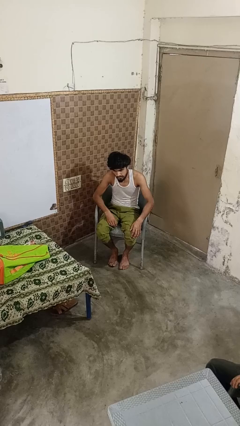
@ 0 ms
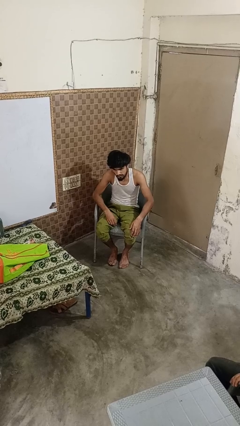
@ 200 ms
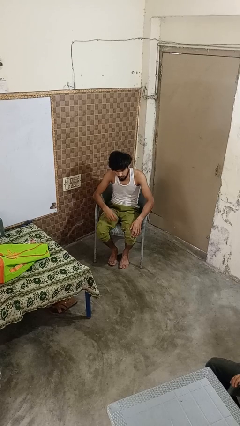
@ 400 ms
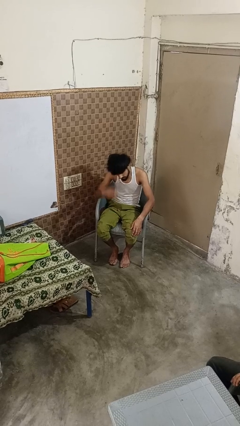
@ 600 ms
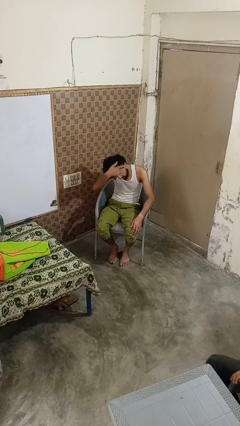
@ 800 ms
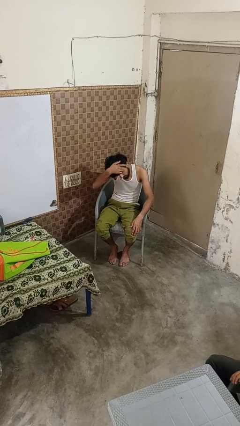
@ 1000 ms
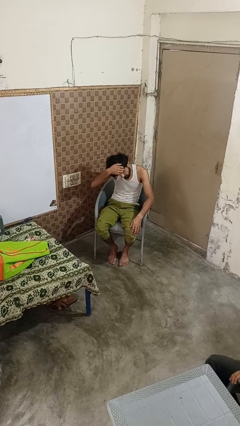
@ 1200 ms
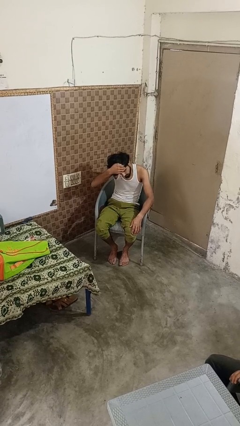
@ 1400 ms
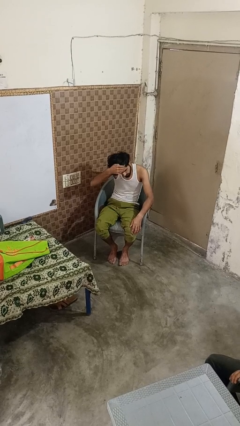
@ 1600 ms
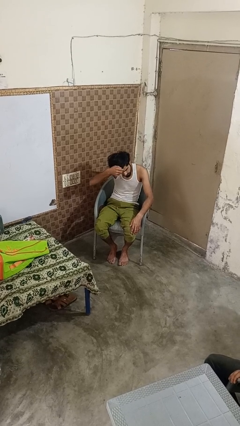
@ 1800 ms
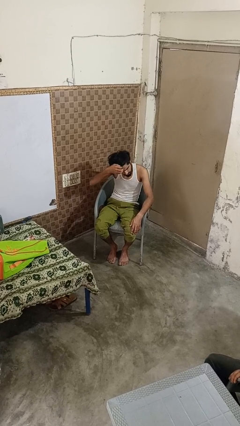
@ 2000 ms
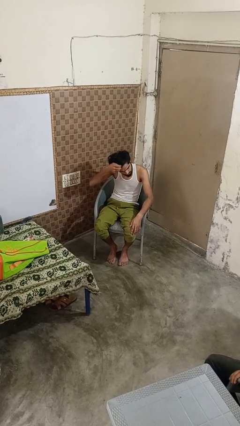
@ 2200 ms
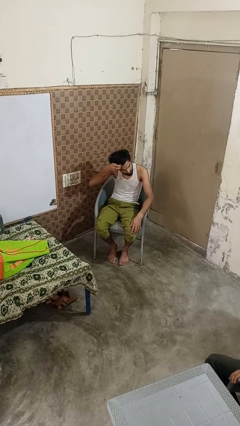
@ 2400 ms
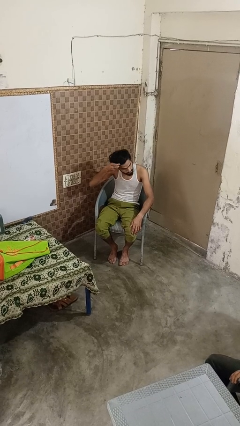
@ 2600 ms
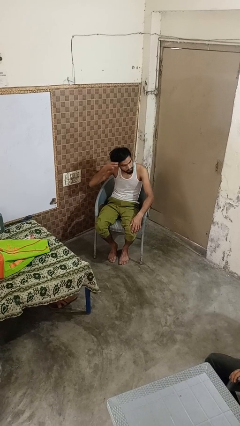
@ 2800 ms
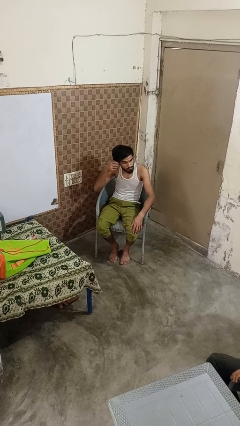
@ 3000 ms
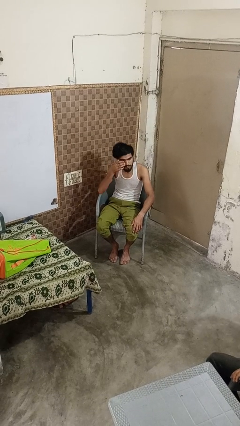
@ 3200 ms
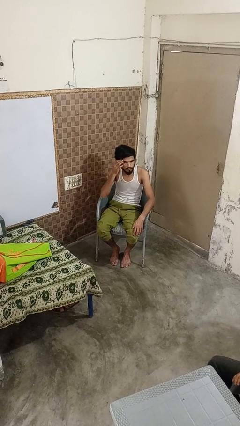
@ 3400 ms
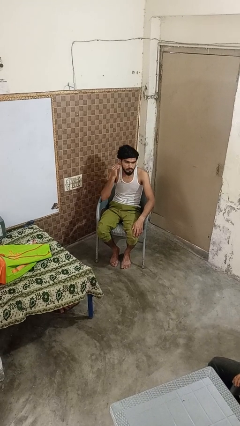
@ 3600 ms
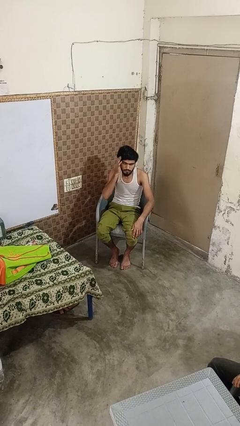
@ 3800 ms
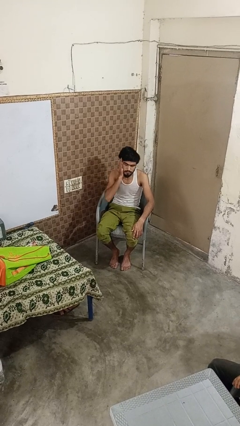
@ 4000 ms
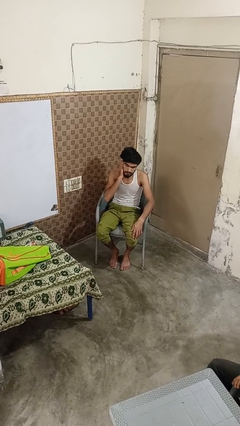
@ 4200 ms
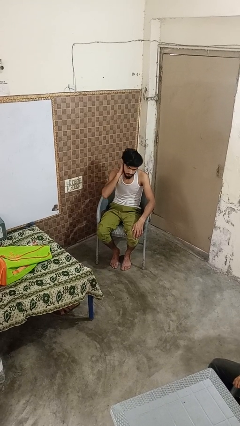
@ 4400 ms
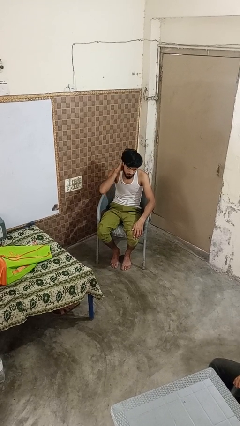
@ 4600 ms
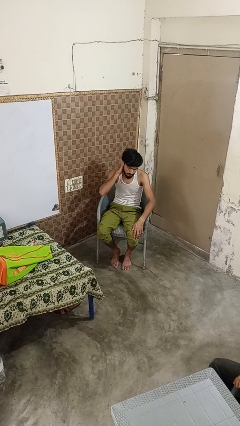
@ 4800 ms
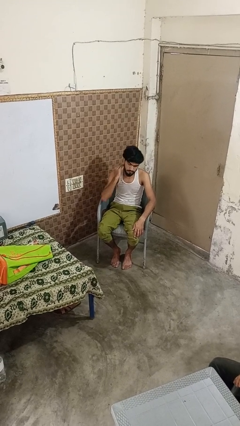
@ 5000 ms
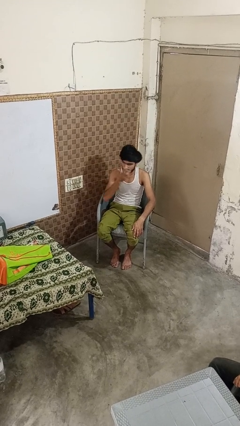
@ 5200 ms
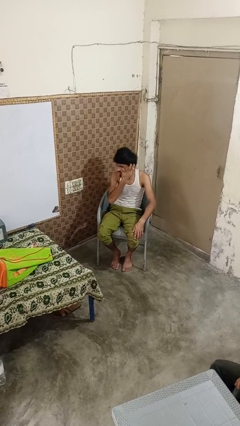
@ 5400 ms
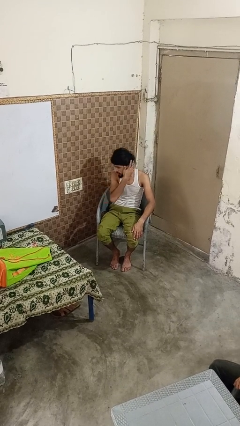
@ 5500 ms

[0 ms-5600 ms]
person strokes hair

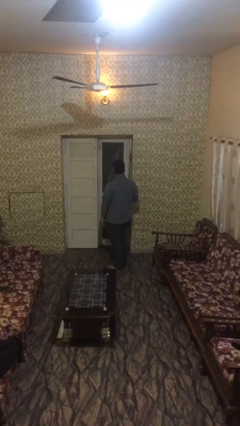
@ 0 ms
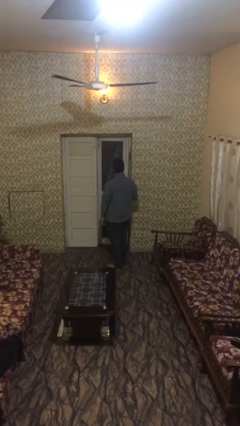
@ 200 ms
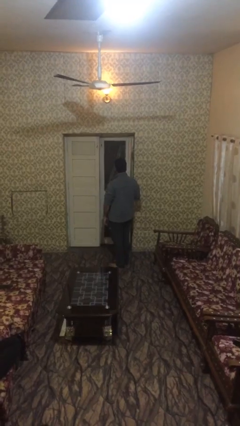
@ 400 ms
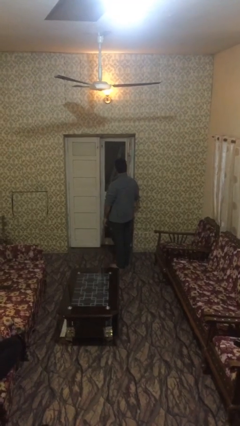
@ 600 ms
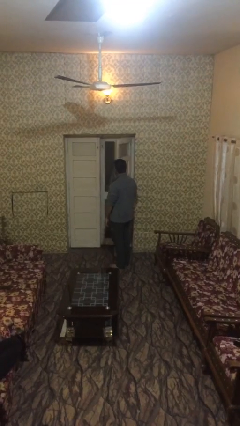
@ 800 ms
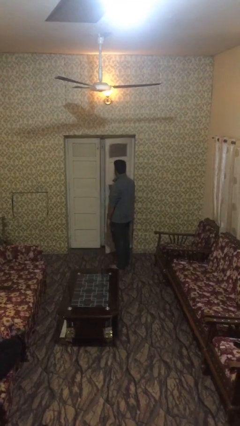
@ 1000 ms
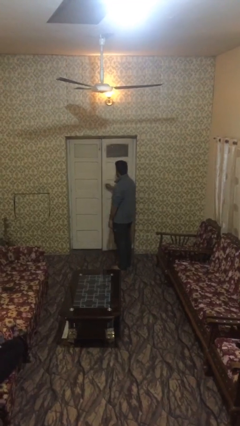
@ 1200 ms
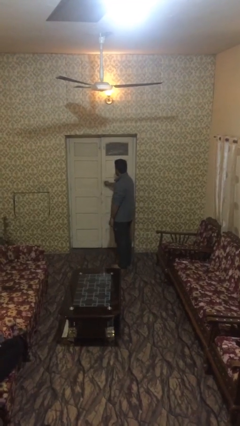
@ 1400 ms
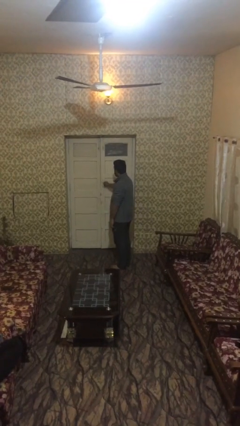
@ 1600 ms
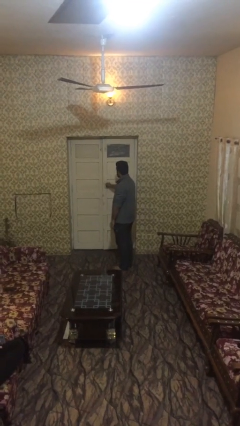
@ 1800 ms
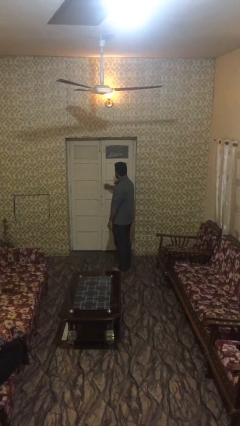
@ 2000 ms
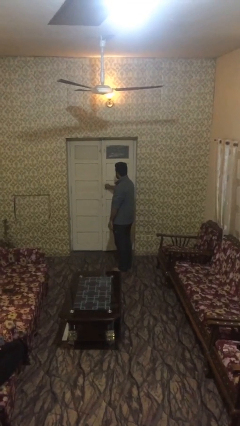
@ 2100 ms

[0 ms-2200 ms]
person closes facility door

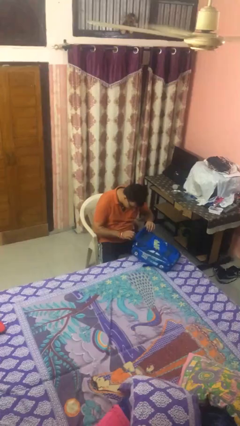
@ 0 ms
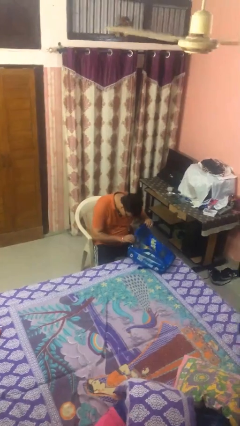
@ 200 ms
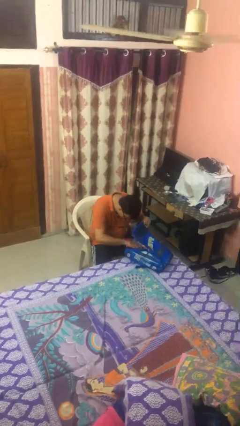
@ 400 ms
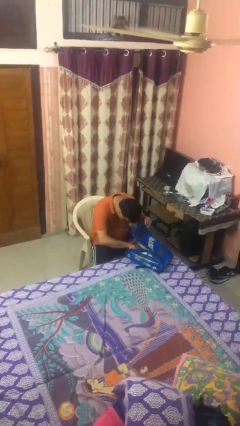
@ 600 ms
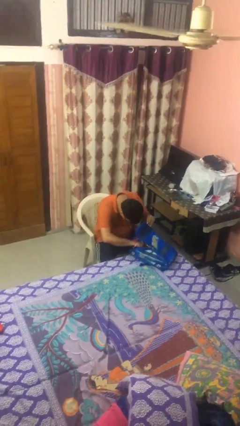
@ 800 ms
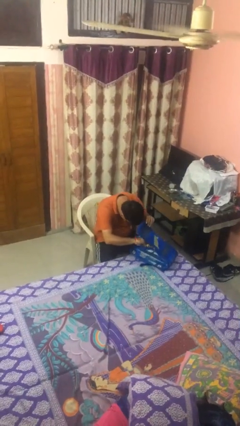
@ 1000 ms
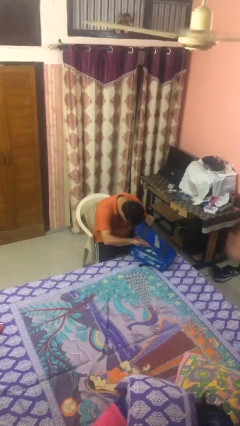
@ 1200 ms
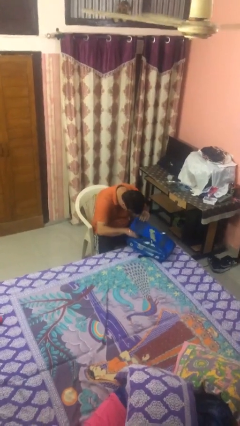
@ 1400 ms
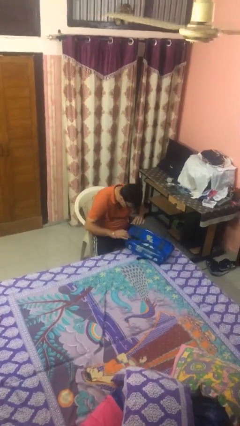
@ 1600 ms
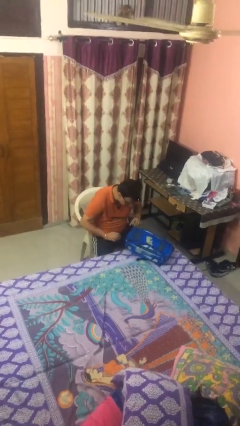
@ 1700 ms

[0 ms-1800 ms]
person searches in bag

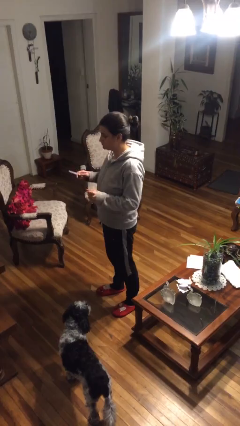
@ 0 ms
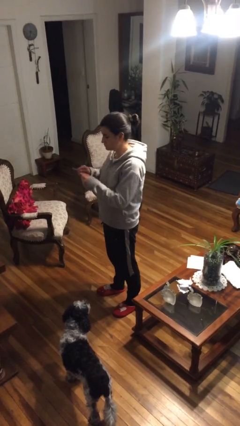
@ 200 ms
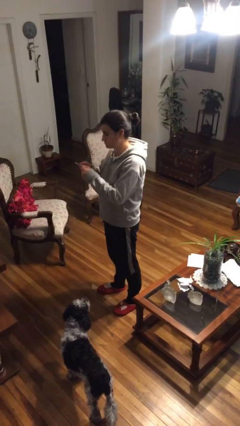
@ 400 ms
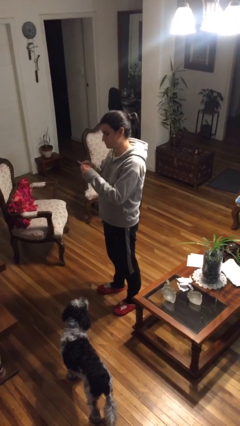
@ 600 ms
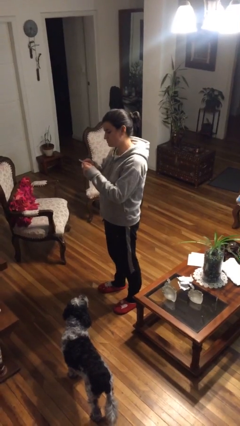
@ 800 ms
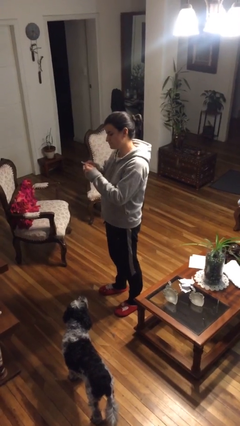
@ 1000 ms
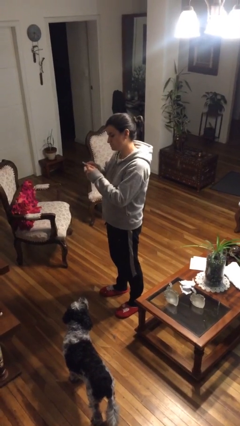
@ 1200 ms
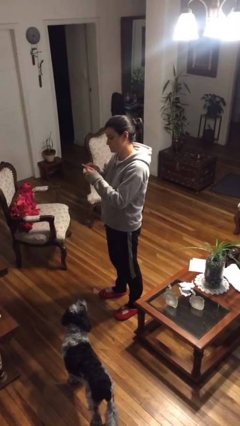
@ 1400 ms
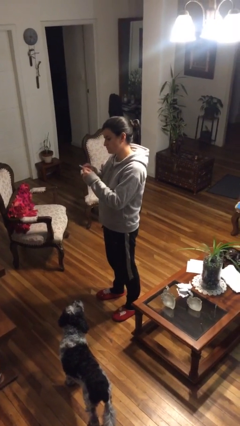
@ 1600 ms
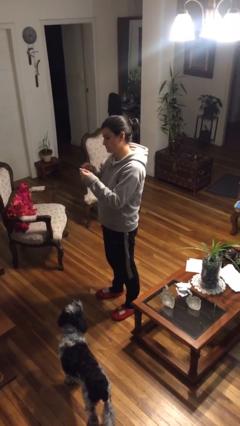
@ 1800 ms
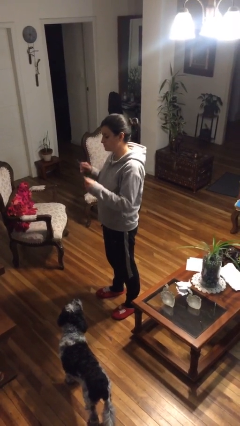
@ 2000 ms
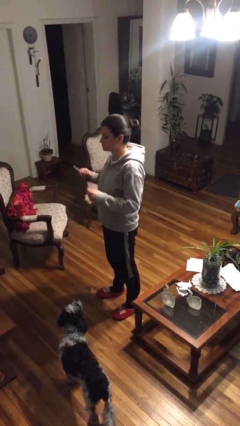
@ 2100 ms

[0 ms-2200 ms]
person files fingernails

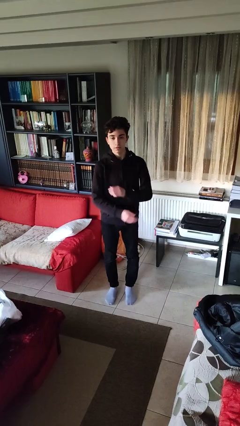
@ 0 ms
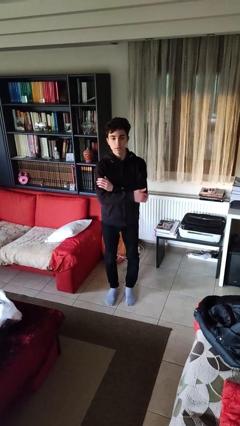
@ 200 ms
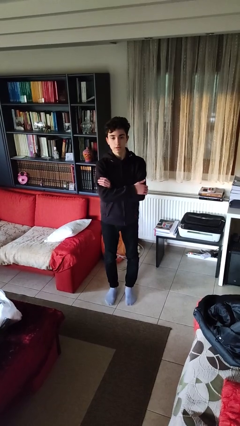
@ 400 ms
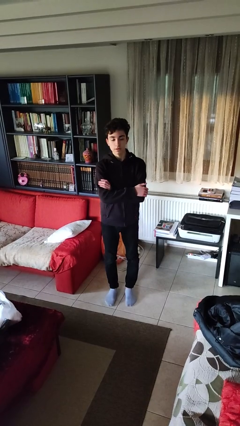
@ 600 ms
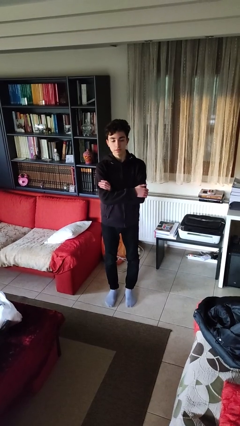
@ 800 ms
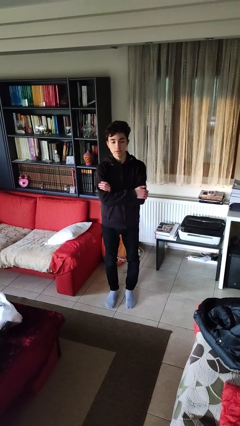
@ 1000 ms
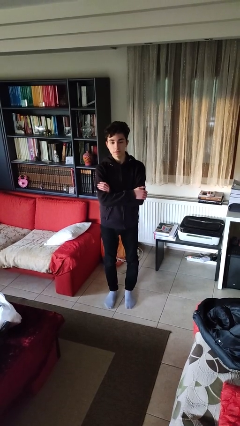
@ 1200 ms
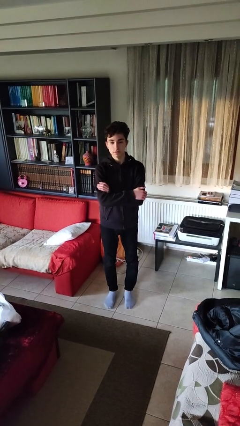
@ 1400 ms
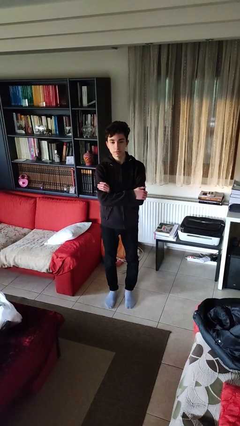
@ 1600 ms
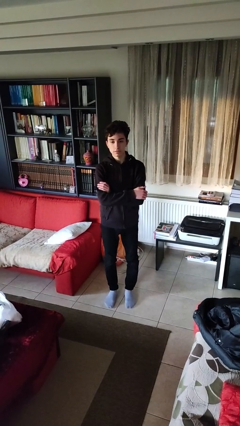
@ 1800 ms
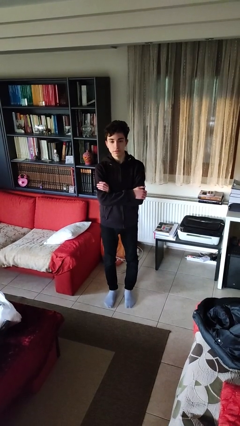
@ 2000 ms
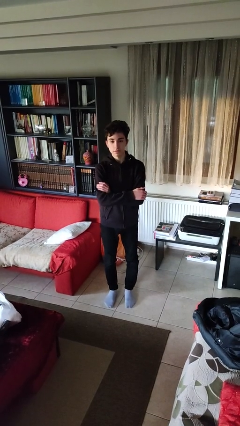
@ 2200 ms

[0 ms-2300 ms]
person crosses arms

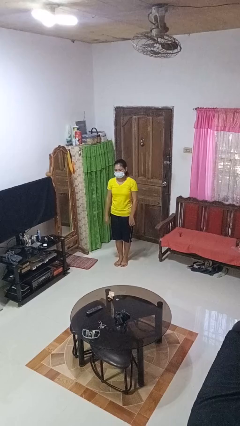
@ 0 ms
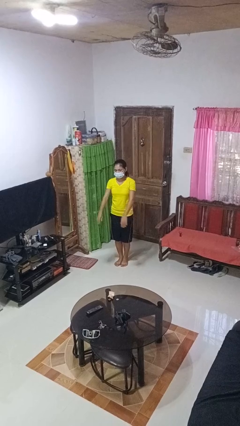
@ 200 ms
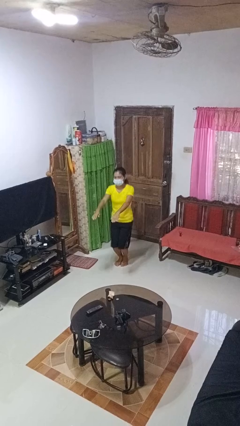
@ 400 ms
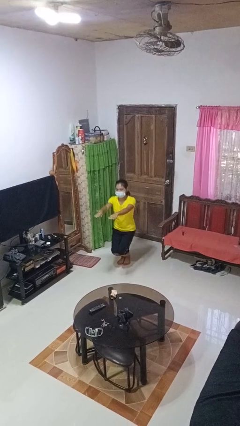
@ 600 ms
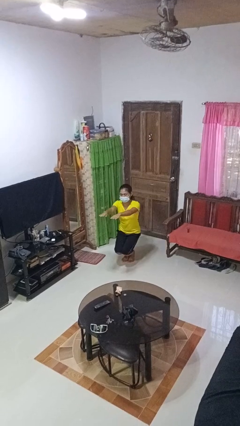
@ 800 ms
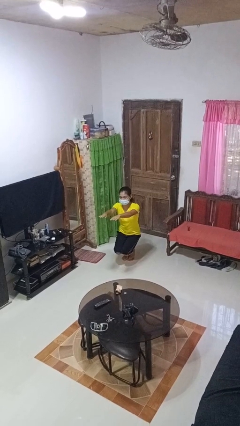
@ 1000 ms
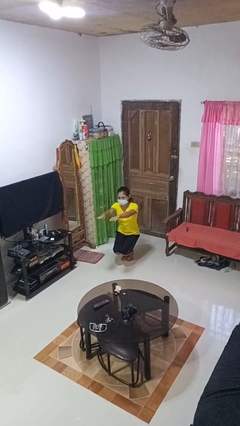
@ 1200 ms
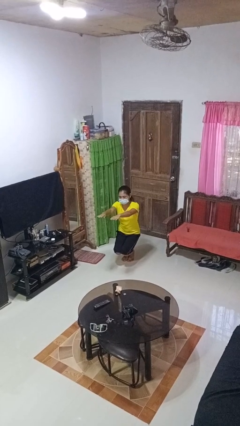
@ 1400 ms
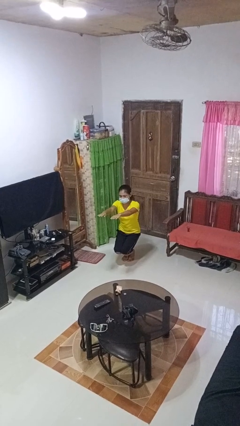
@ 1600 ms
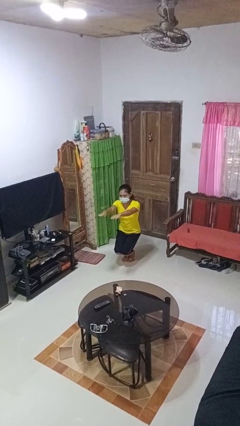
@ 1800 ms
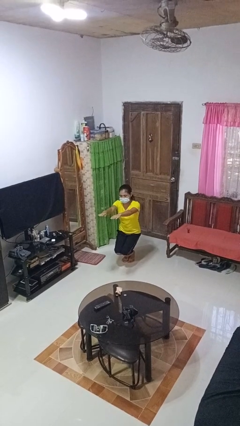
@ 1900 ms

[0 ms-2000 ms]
person squats

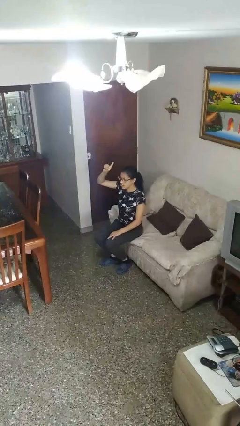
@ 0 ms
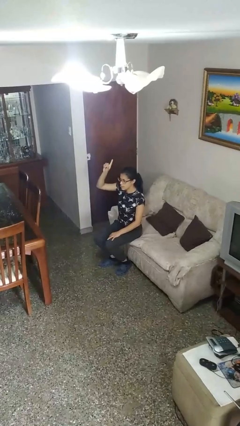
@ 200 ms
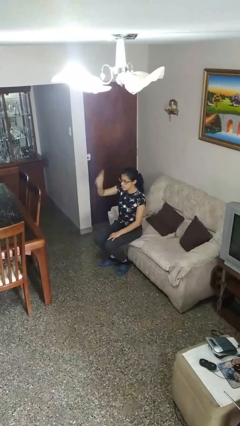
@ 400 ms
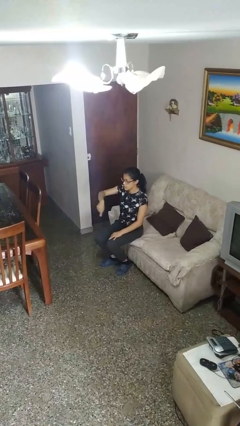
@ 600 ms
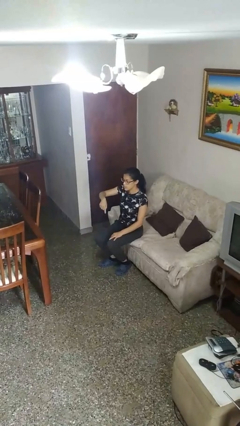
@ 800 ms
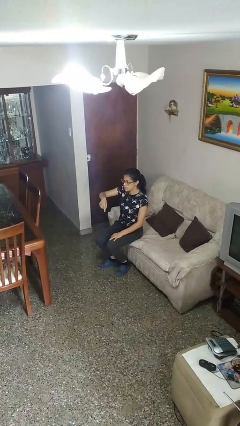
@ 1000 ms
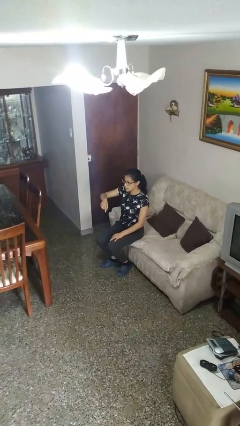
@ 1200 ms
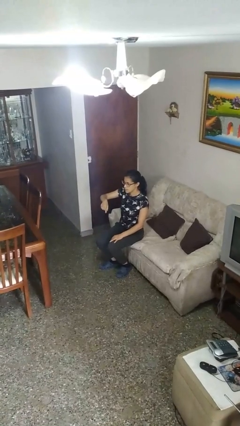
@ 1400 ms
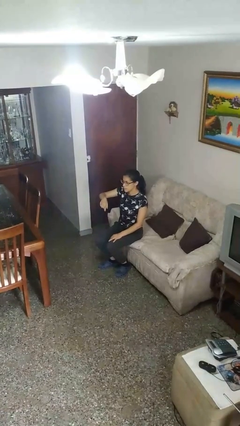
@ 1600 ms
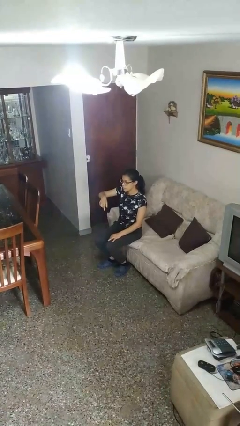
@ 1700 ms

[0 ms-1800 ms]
person gestures swipe down
